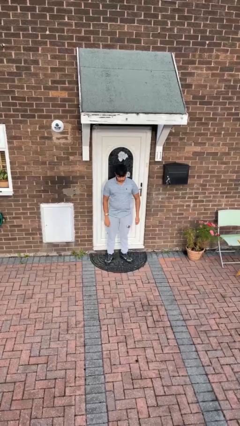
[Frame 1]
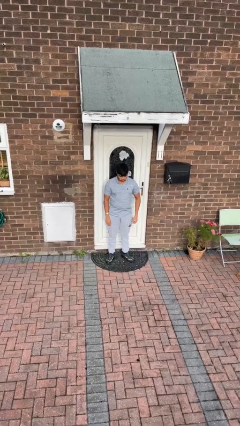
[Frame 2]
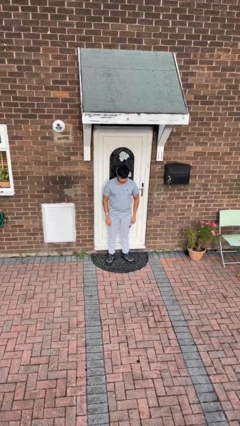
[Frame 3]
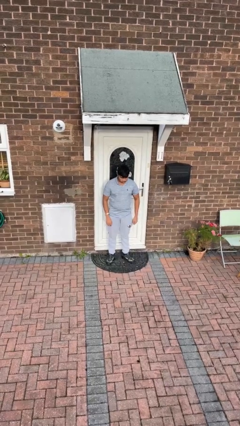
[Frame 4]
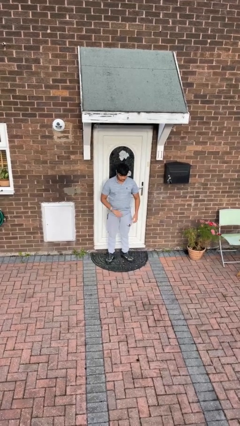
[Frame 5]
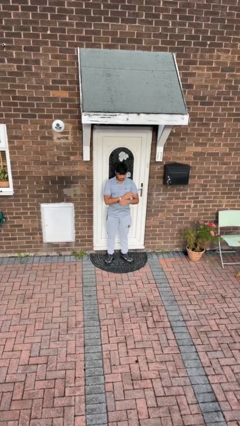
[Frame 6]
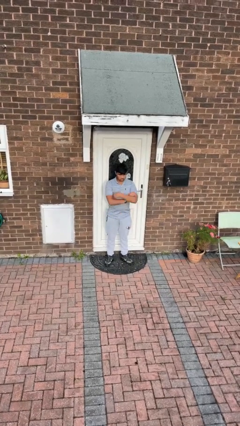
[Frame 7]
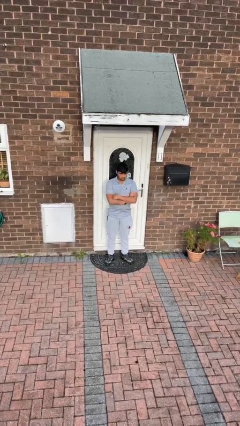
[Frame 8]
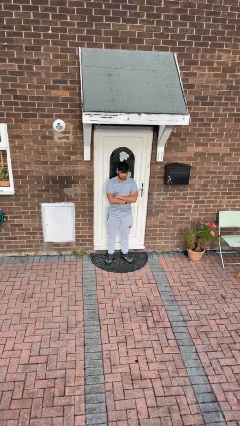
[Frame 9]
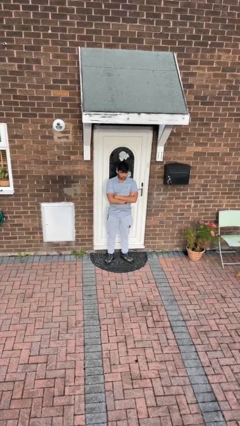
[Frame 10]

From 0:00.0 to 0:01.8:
person crosses arms

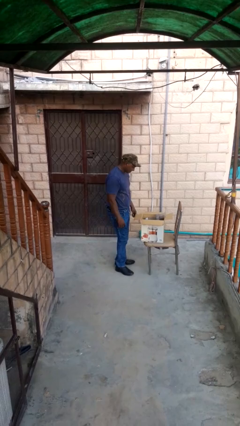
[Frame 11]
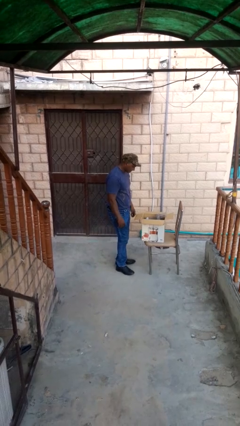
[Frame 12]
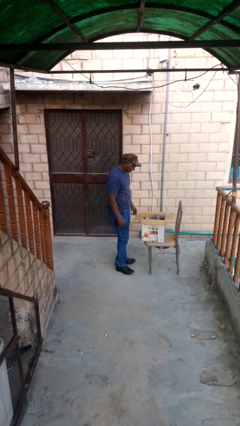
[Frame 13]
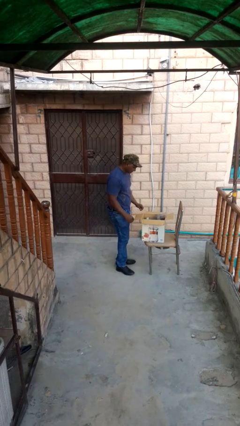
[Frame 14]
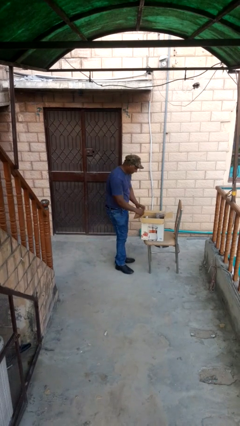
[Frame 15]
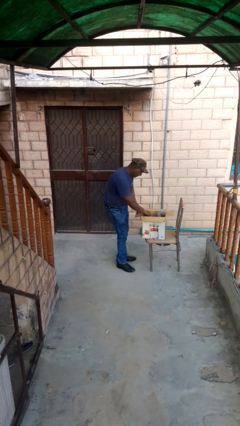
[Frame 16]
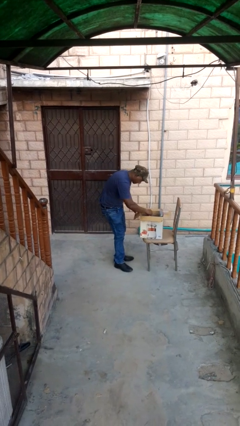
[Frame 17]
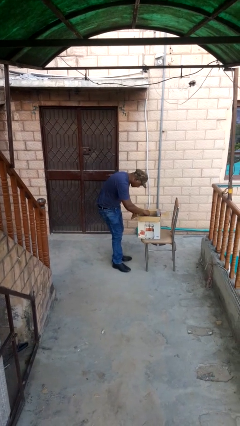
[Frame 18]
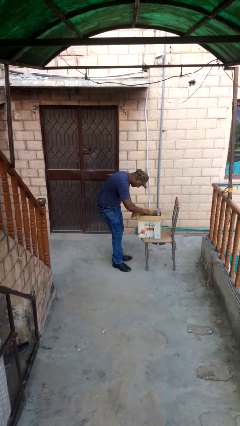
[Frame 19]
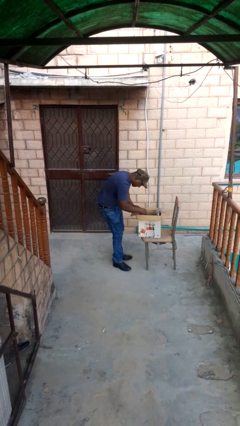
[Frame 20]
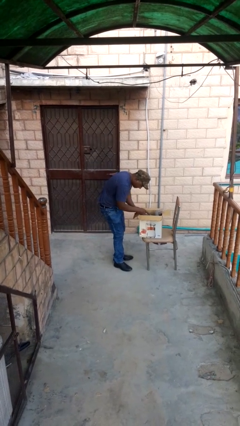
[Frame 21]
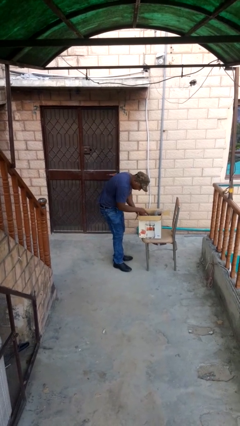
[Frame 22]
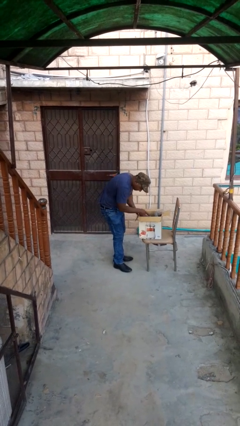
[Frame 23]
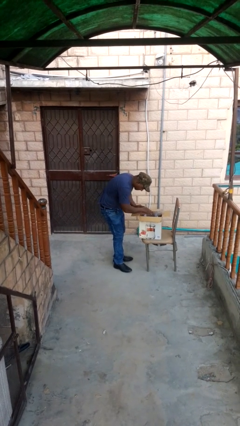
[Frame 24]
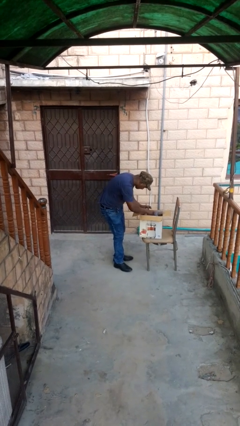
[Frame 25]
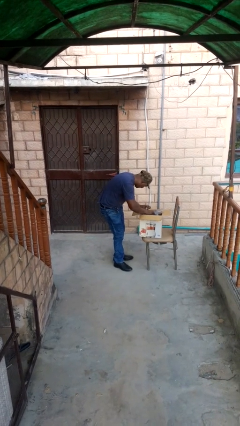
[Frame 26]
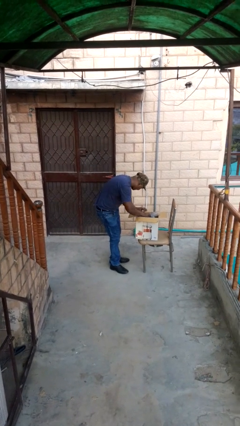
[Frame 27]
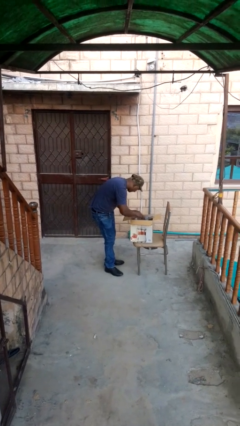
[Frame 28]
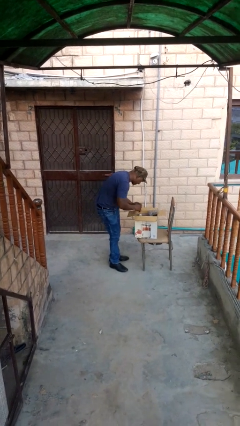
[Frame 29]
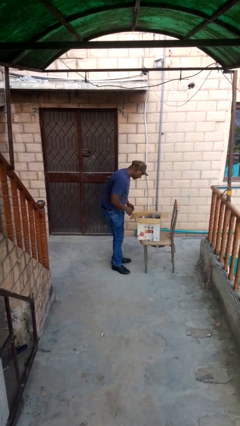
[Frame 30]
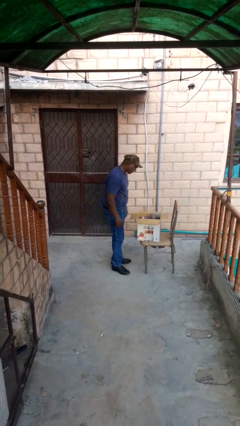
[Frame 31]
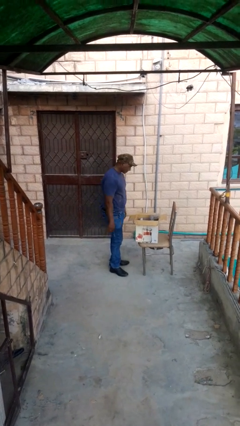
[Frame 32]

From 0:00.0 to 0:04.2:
person searches in box

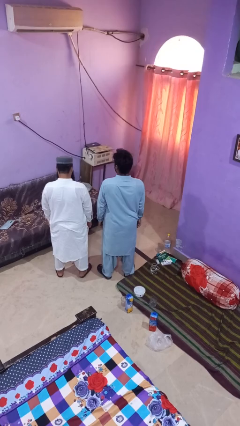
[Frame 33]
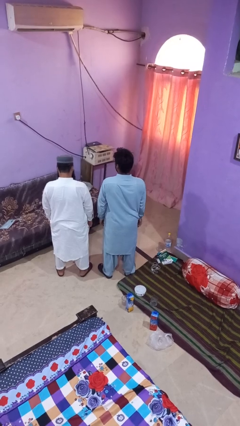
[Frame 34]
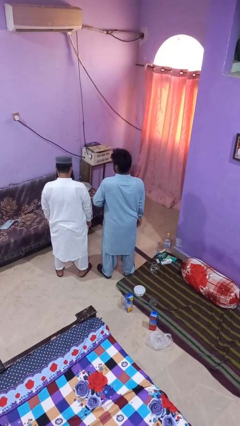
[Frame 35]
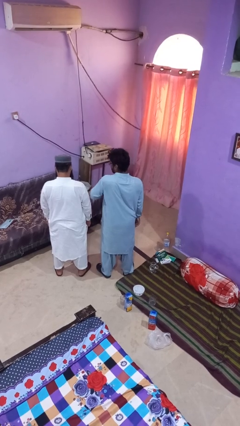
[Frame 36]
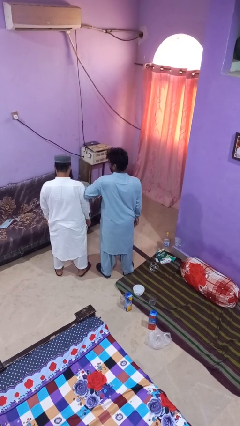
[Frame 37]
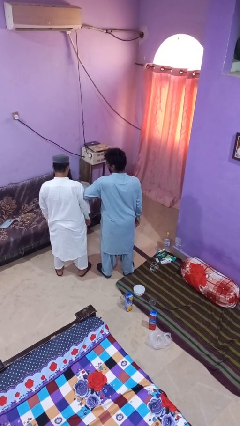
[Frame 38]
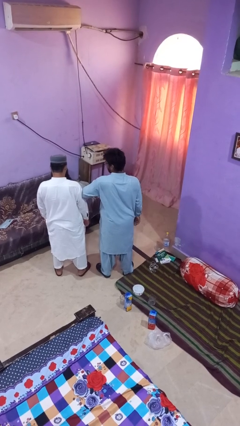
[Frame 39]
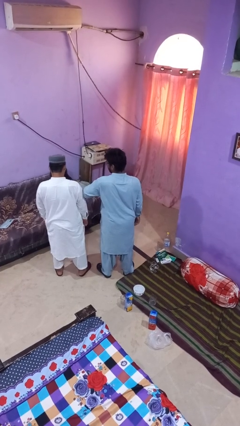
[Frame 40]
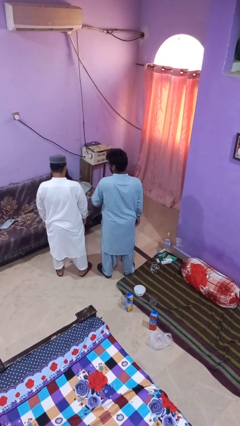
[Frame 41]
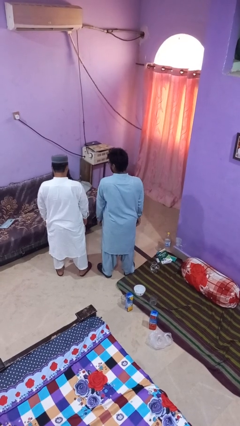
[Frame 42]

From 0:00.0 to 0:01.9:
person nudges person with elbow

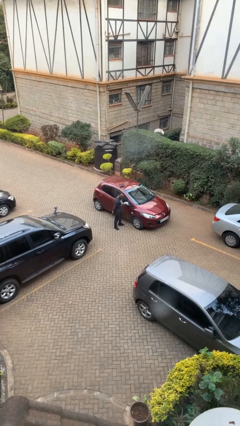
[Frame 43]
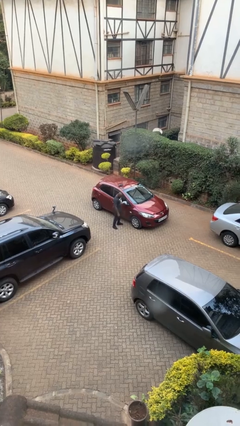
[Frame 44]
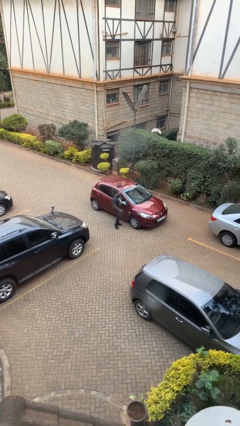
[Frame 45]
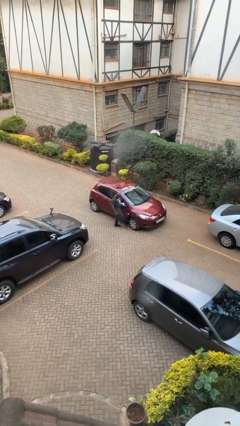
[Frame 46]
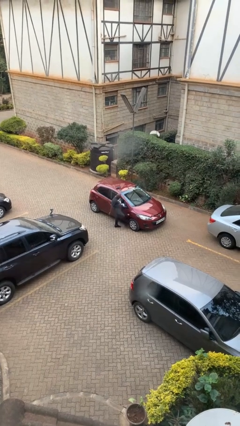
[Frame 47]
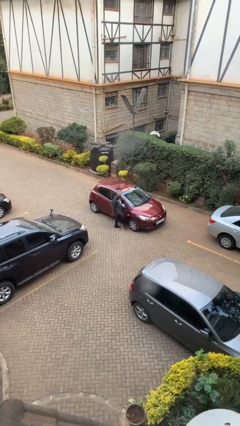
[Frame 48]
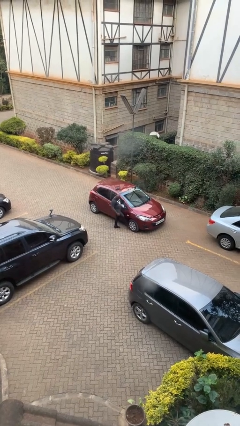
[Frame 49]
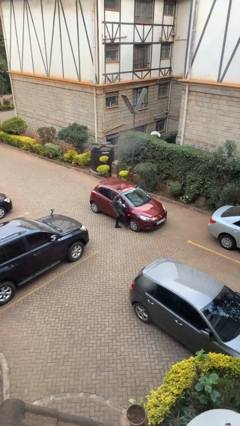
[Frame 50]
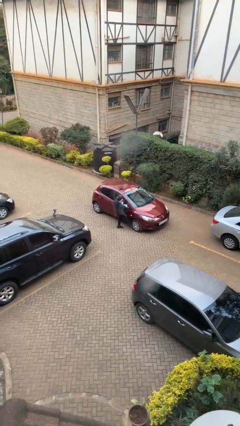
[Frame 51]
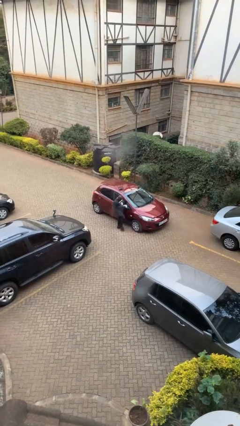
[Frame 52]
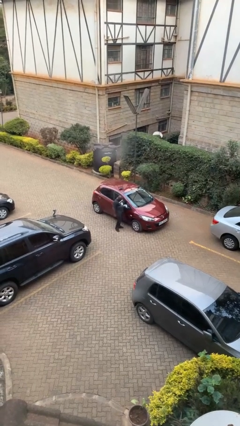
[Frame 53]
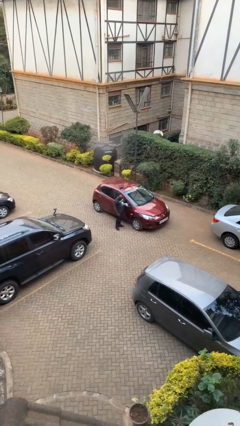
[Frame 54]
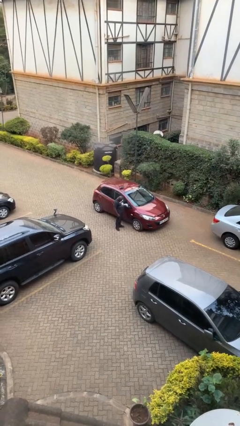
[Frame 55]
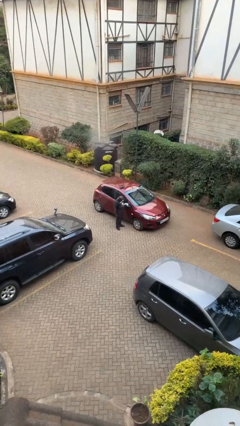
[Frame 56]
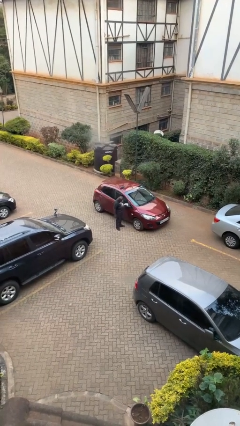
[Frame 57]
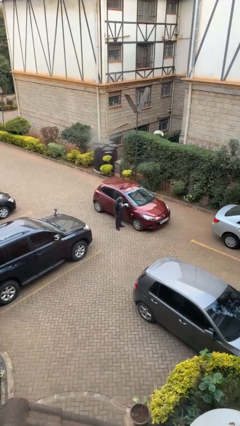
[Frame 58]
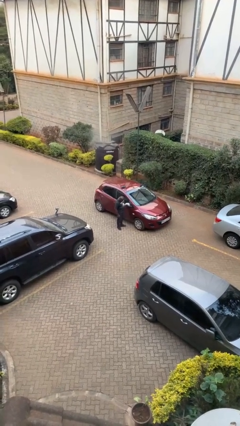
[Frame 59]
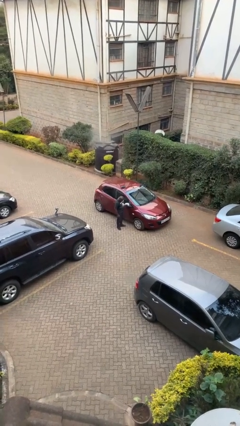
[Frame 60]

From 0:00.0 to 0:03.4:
person kicks car tires

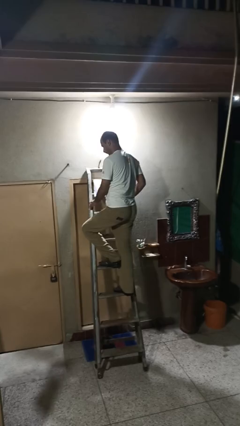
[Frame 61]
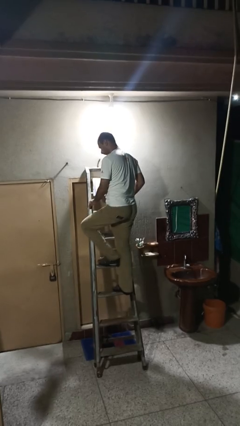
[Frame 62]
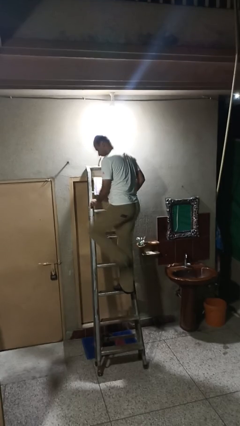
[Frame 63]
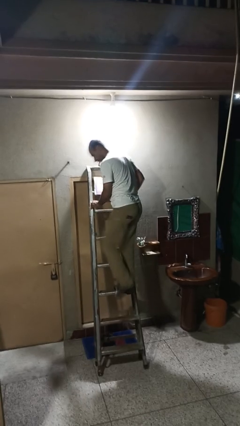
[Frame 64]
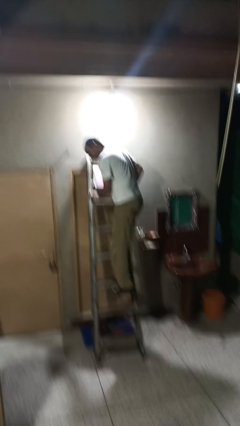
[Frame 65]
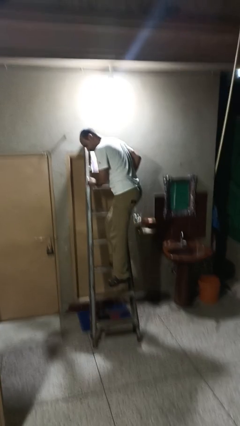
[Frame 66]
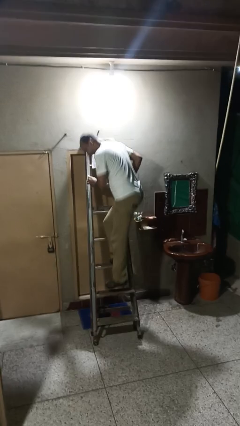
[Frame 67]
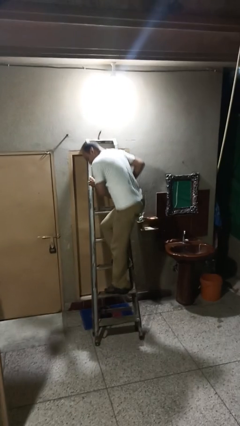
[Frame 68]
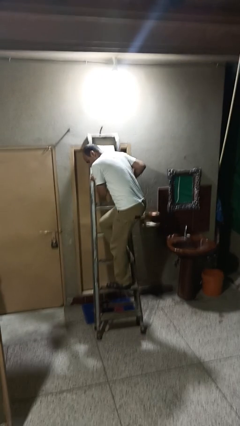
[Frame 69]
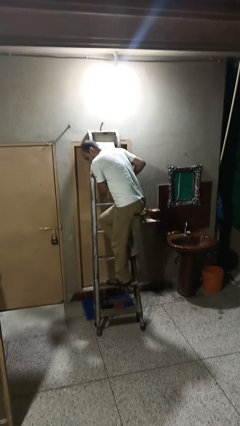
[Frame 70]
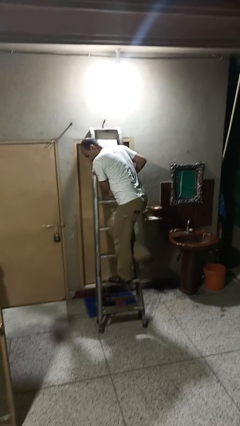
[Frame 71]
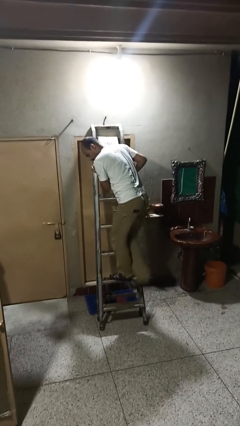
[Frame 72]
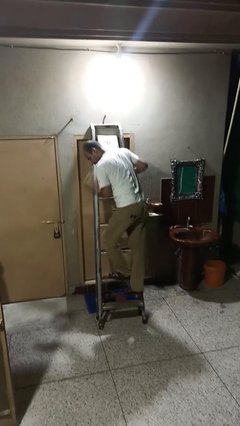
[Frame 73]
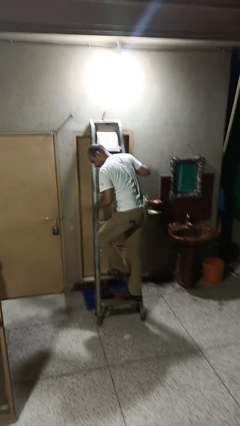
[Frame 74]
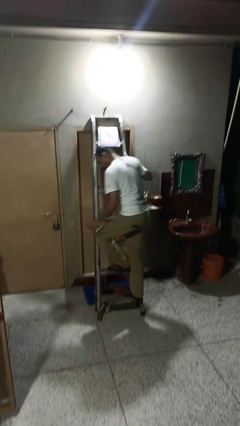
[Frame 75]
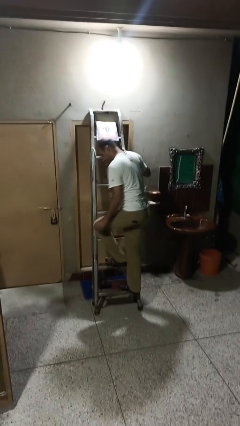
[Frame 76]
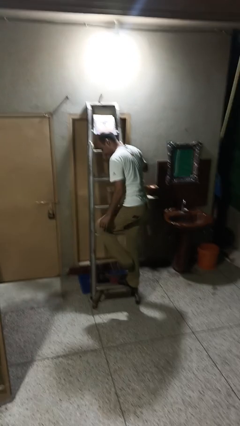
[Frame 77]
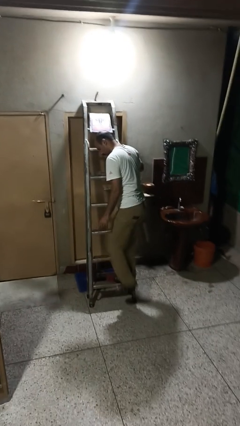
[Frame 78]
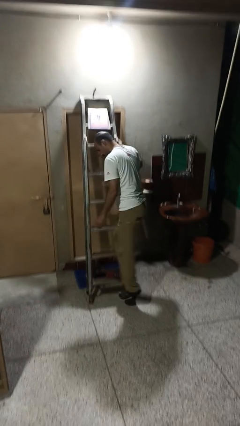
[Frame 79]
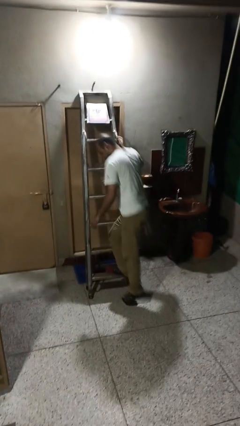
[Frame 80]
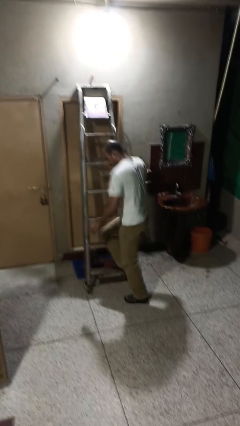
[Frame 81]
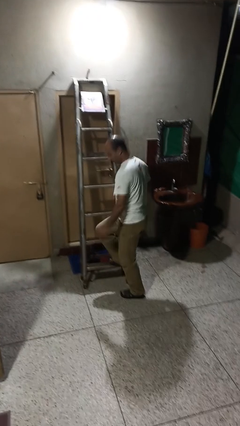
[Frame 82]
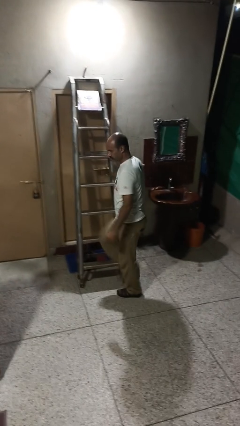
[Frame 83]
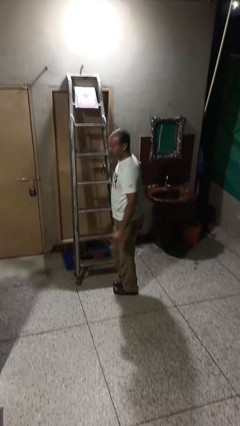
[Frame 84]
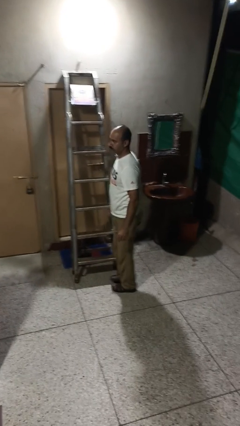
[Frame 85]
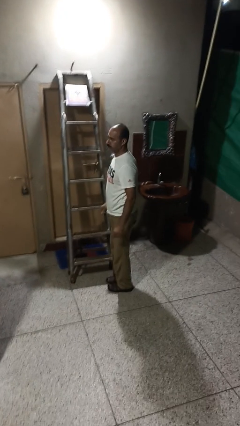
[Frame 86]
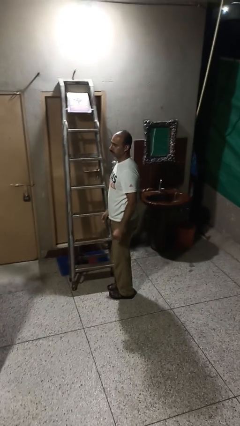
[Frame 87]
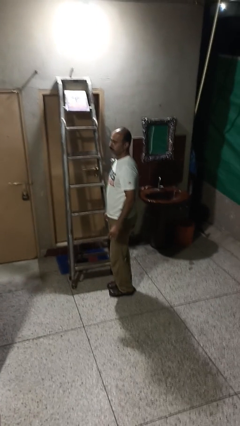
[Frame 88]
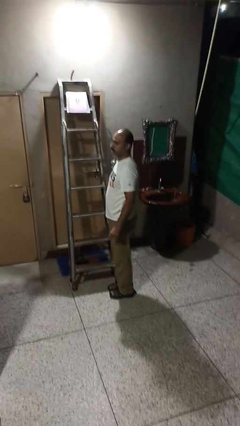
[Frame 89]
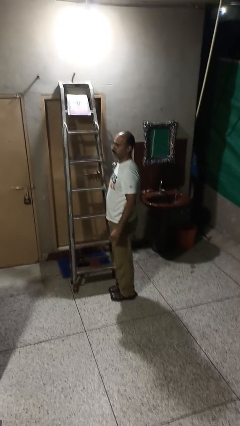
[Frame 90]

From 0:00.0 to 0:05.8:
person climbs down ladder

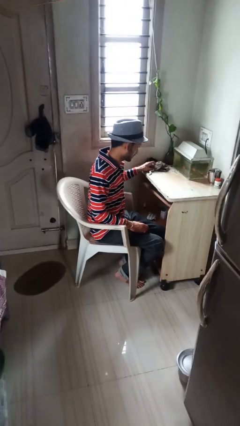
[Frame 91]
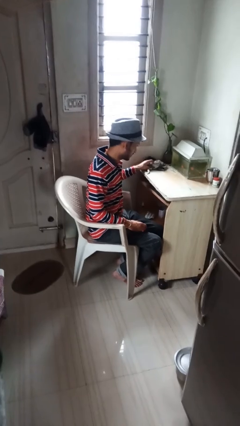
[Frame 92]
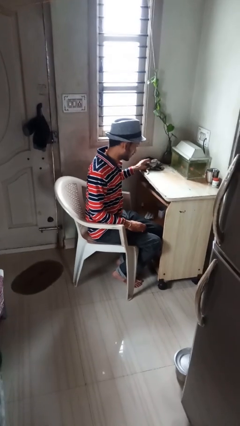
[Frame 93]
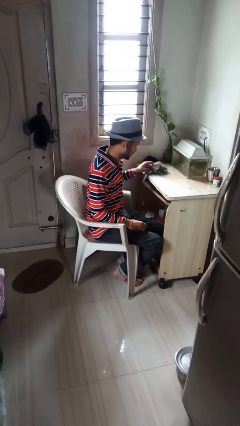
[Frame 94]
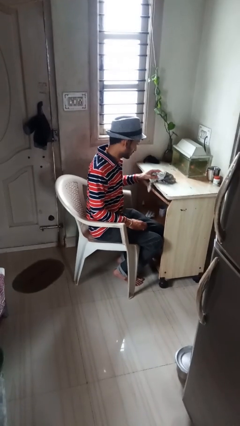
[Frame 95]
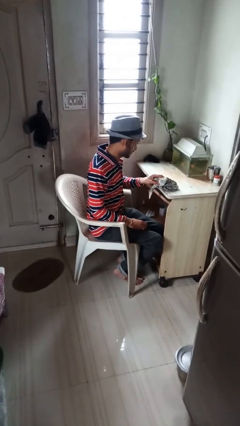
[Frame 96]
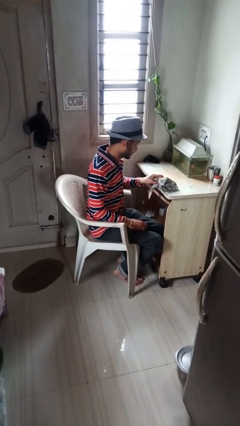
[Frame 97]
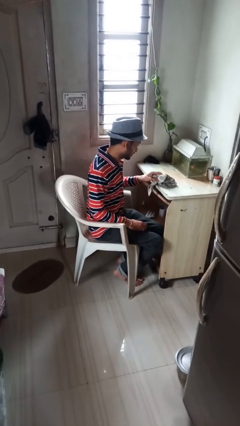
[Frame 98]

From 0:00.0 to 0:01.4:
person cleans table with rag
